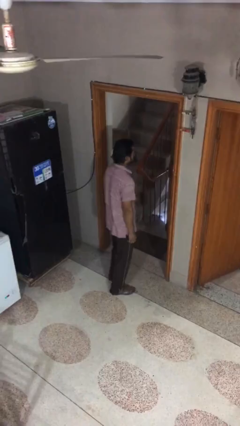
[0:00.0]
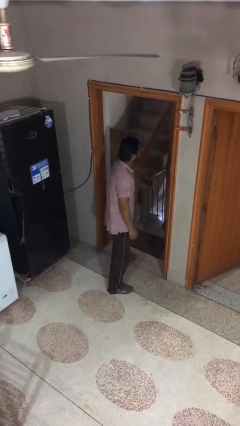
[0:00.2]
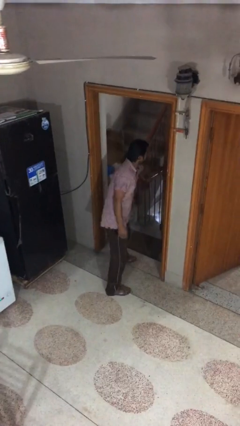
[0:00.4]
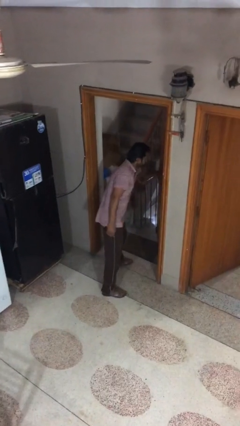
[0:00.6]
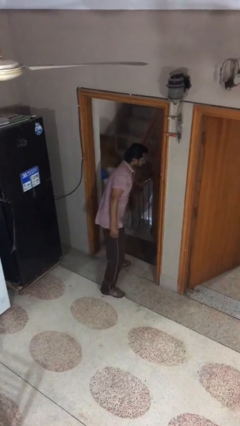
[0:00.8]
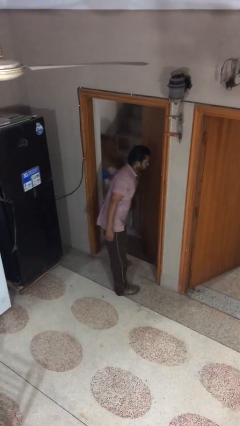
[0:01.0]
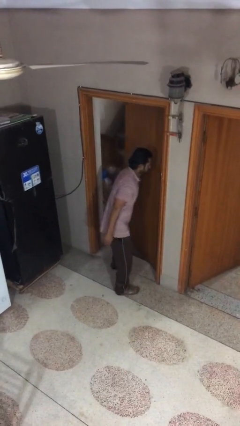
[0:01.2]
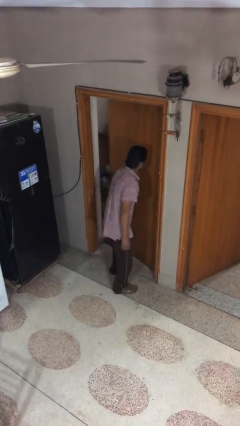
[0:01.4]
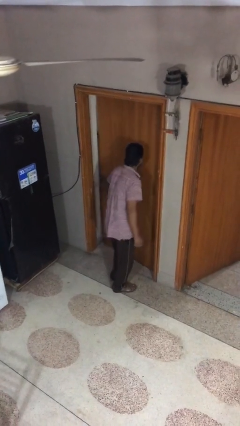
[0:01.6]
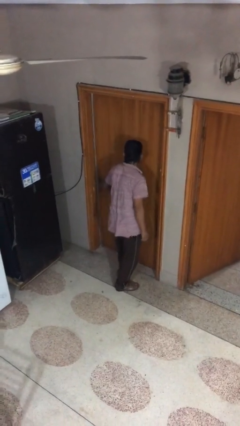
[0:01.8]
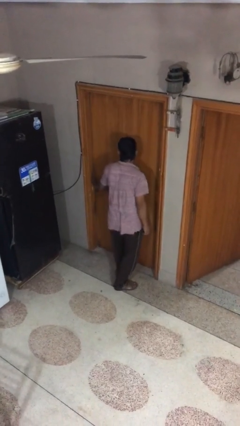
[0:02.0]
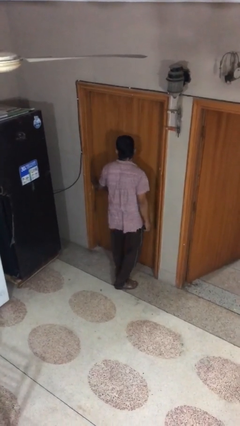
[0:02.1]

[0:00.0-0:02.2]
person closes facility door

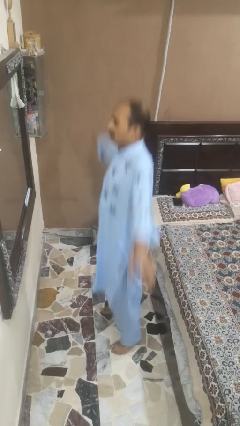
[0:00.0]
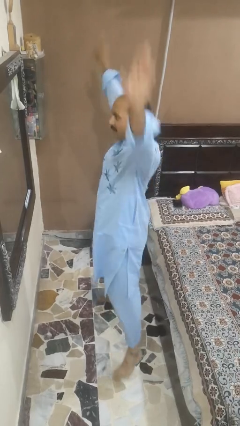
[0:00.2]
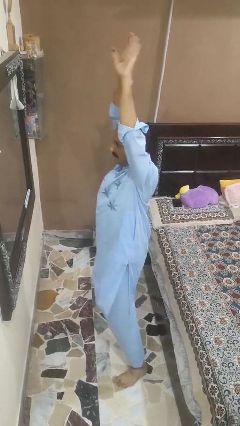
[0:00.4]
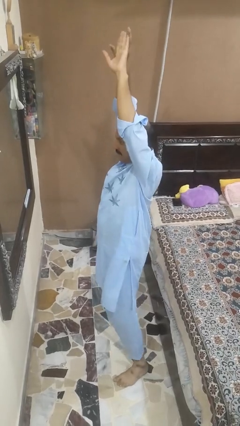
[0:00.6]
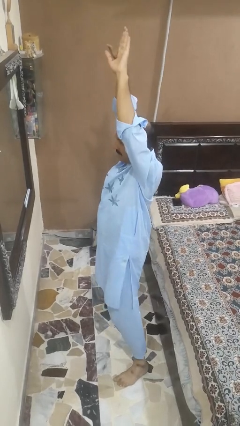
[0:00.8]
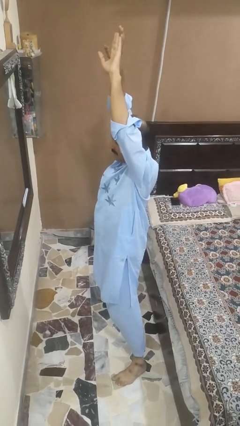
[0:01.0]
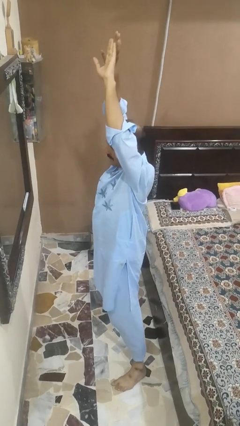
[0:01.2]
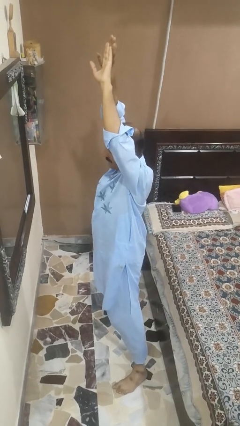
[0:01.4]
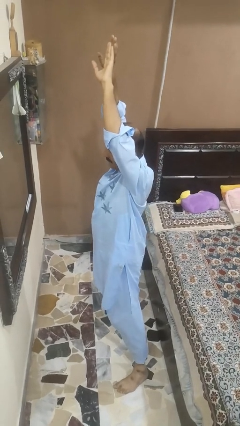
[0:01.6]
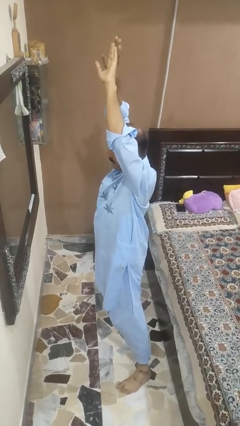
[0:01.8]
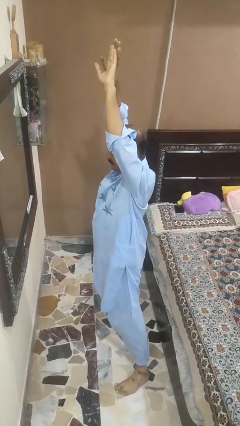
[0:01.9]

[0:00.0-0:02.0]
person exercises with jumping jacks

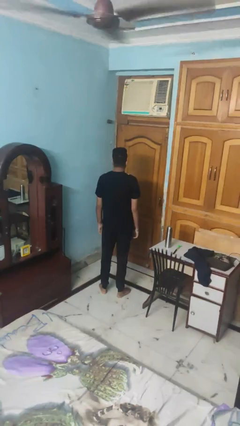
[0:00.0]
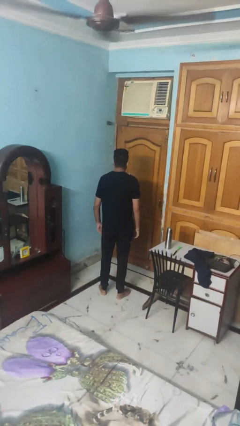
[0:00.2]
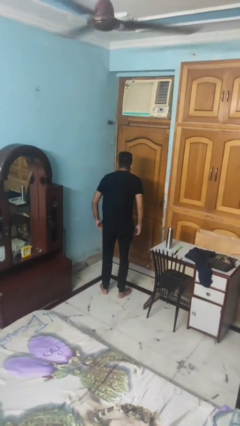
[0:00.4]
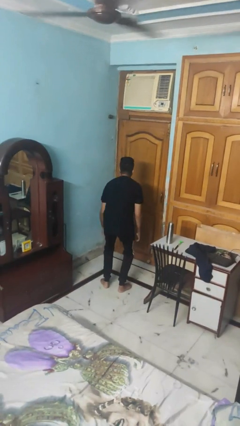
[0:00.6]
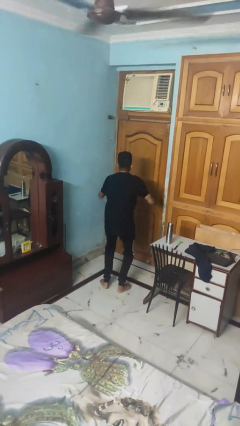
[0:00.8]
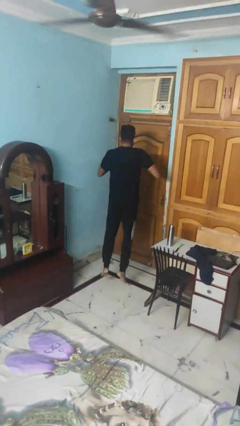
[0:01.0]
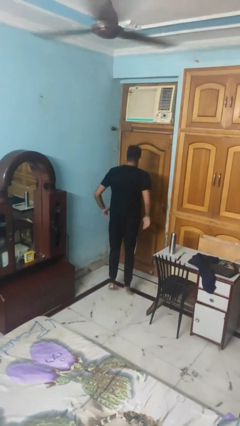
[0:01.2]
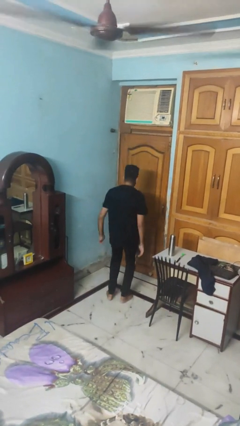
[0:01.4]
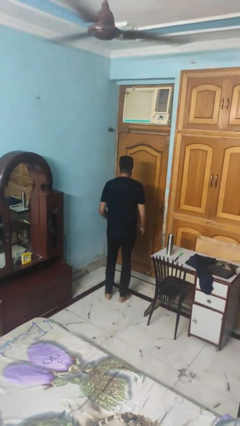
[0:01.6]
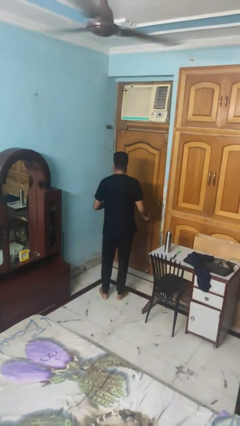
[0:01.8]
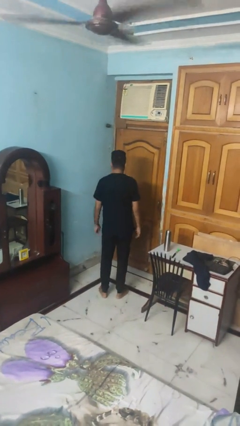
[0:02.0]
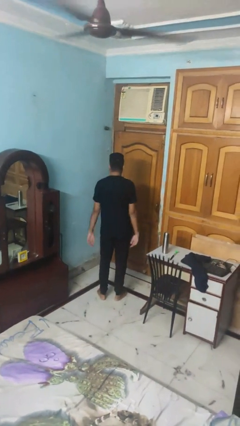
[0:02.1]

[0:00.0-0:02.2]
person jumps

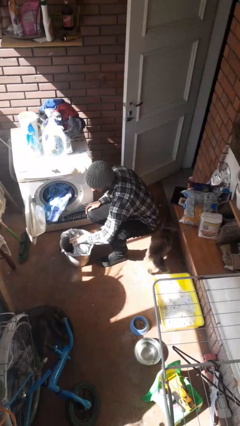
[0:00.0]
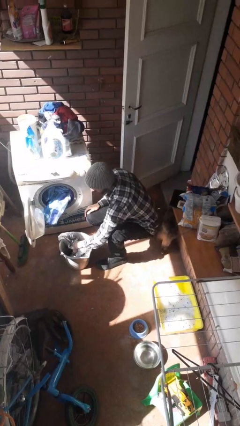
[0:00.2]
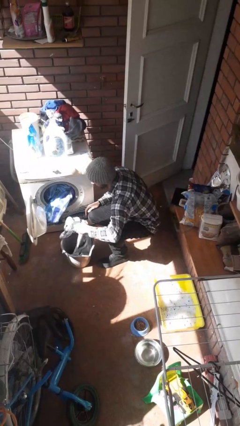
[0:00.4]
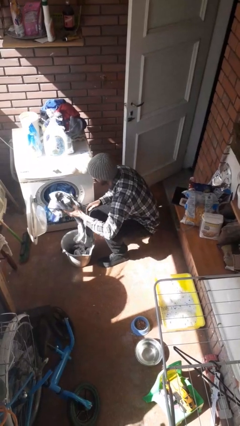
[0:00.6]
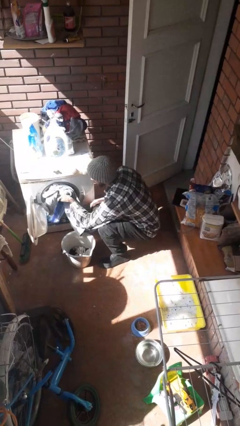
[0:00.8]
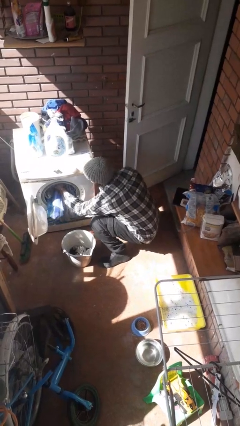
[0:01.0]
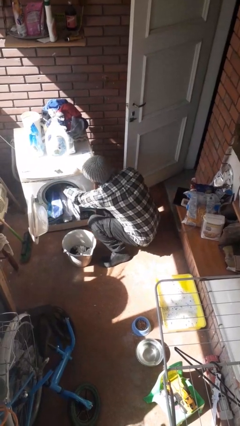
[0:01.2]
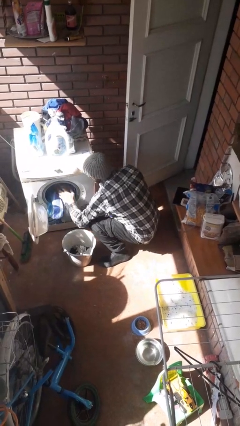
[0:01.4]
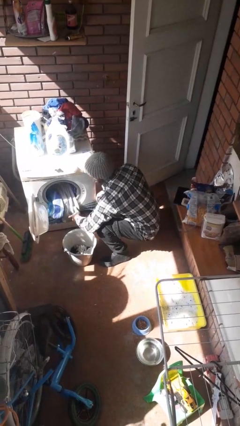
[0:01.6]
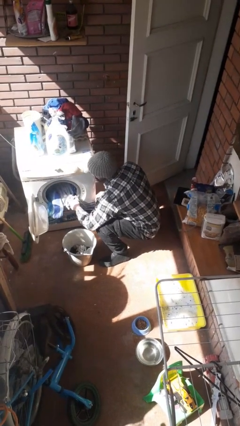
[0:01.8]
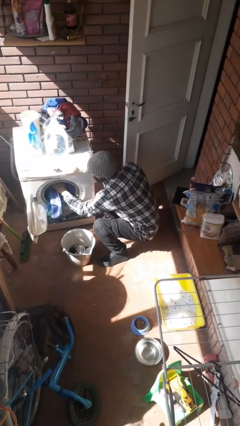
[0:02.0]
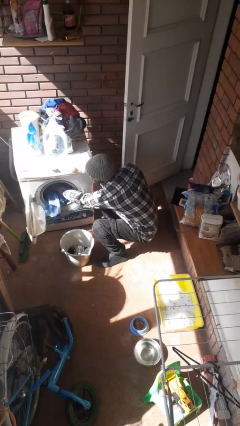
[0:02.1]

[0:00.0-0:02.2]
person loads clotheswasher

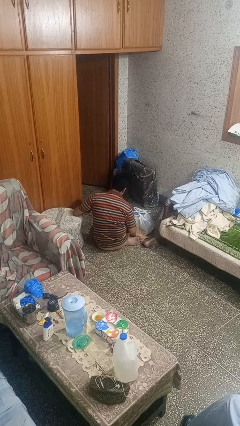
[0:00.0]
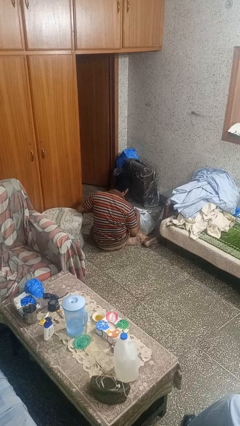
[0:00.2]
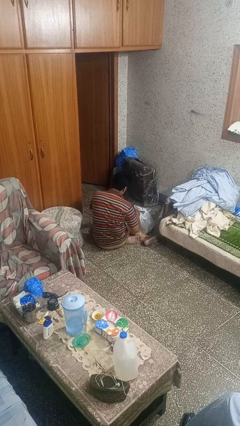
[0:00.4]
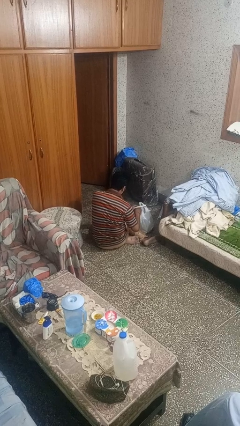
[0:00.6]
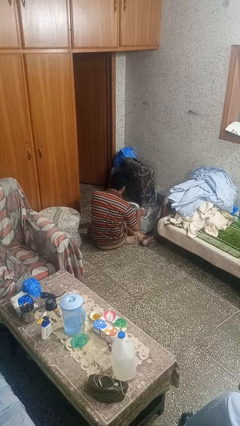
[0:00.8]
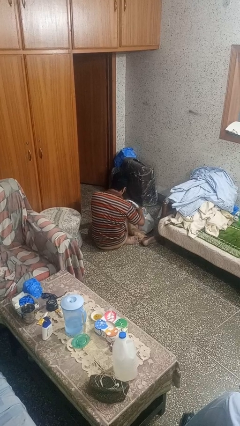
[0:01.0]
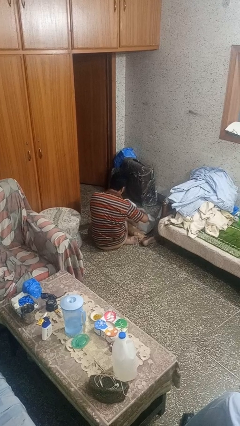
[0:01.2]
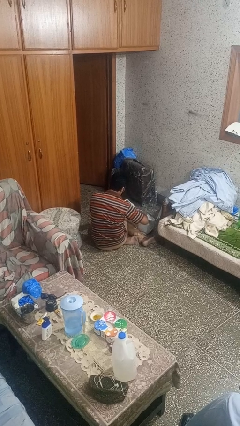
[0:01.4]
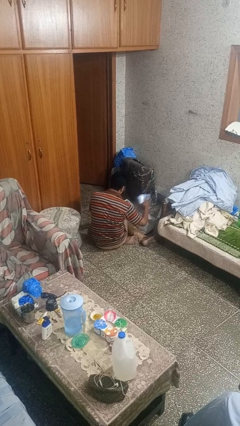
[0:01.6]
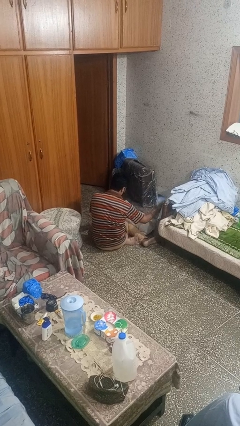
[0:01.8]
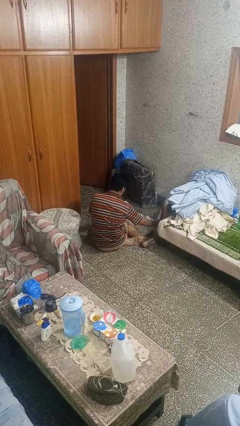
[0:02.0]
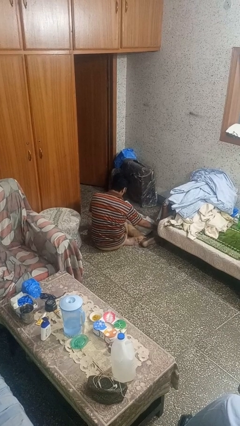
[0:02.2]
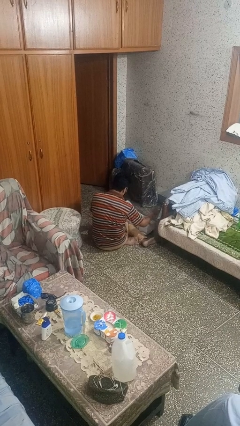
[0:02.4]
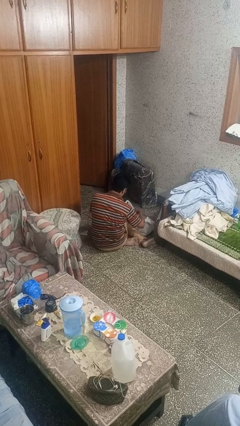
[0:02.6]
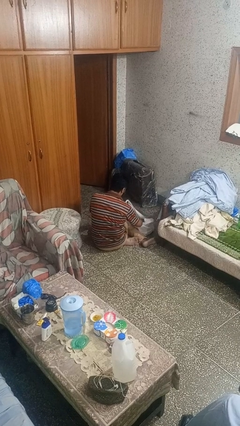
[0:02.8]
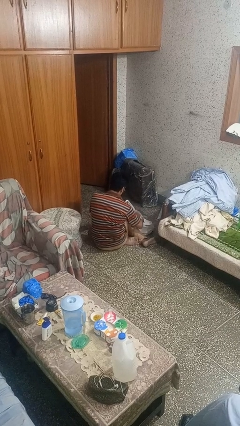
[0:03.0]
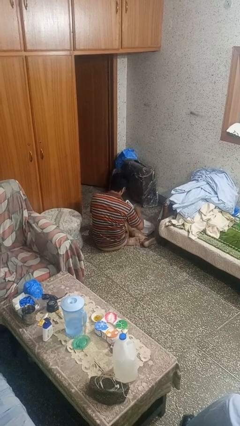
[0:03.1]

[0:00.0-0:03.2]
person takes object from bag

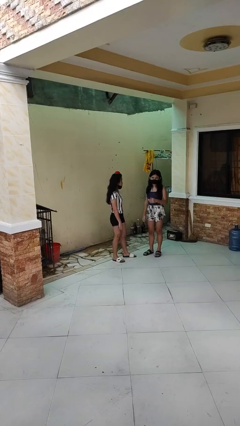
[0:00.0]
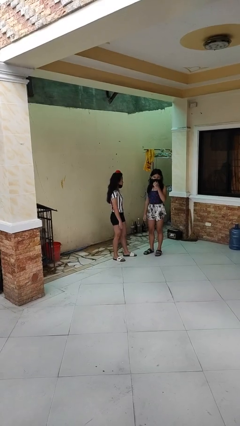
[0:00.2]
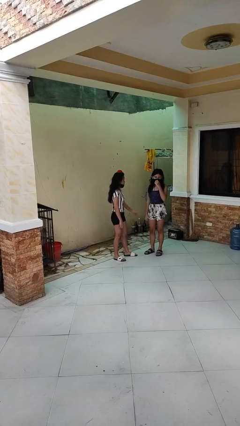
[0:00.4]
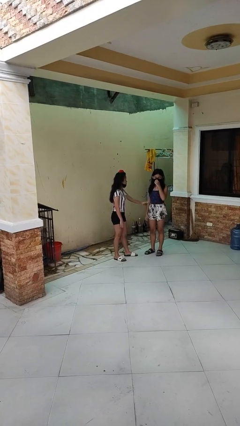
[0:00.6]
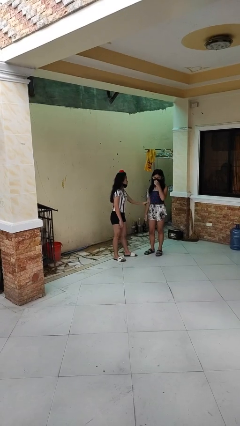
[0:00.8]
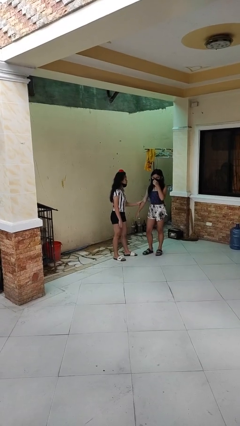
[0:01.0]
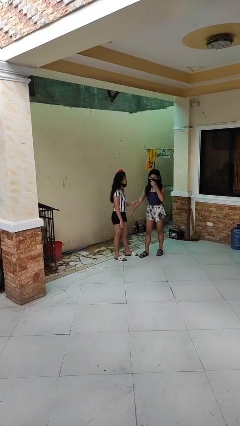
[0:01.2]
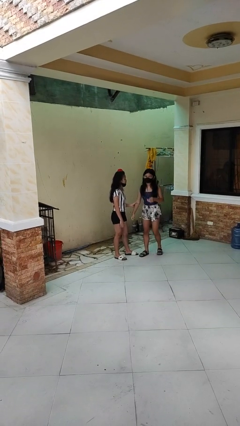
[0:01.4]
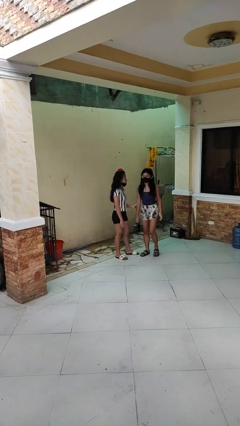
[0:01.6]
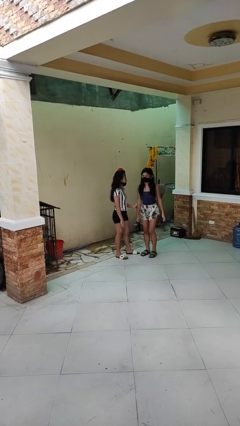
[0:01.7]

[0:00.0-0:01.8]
person grabs person by forearm

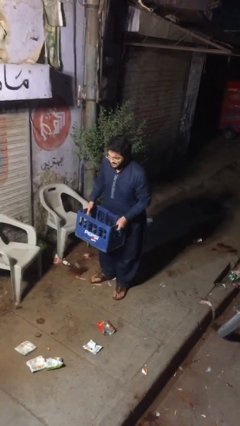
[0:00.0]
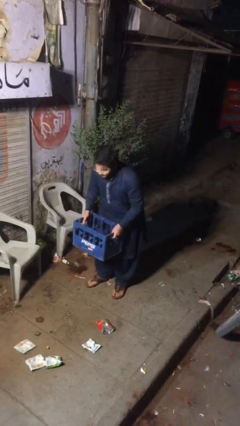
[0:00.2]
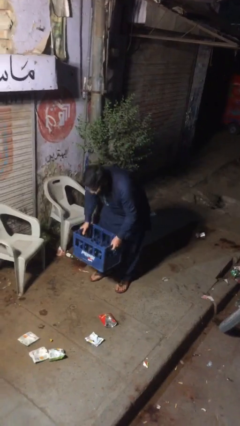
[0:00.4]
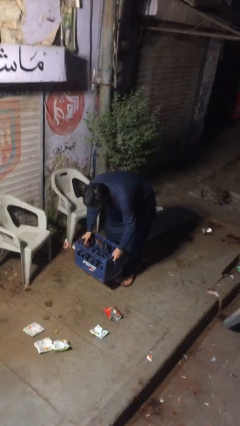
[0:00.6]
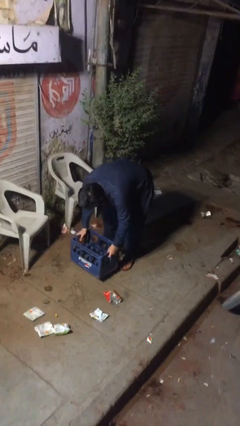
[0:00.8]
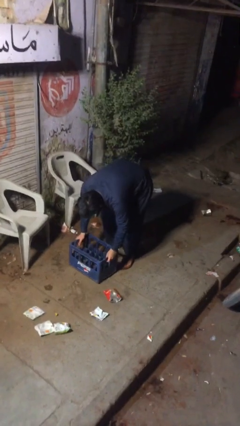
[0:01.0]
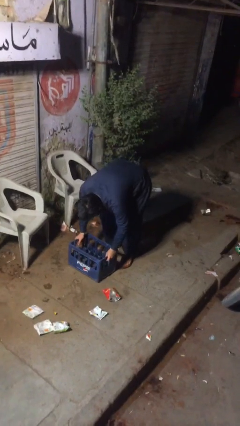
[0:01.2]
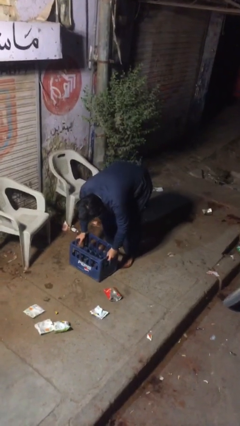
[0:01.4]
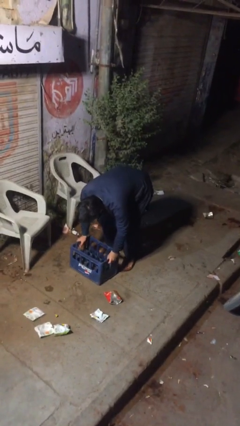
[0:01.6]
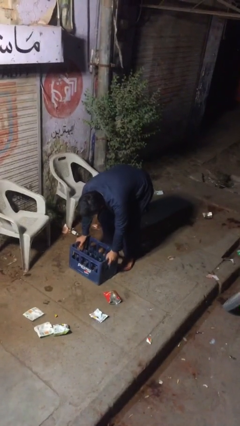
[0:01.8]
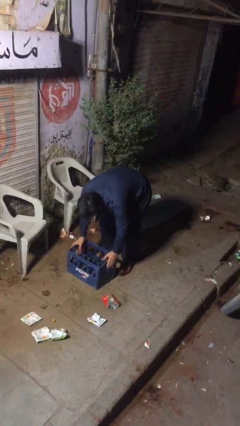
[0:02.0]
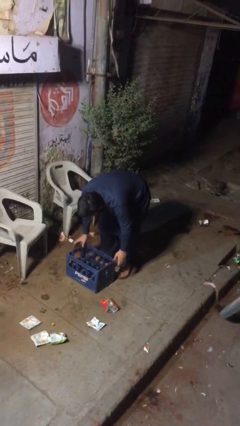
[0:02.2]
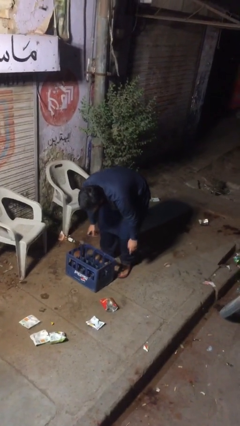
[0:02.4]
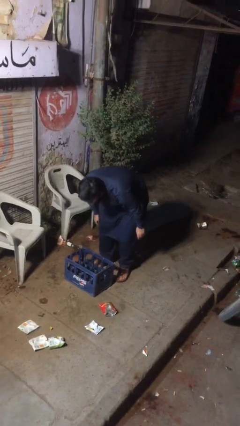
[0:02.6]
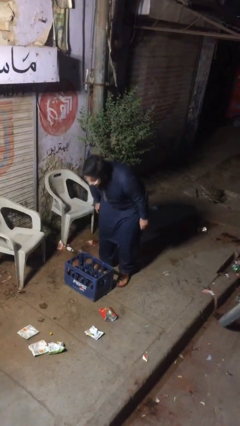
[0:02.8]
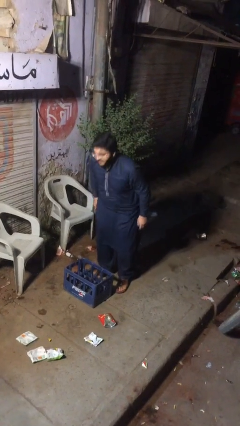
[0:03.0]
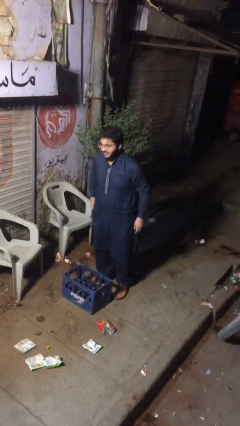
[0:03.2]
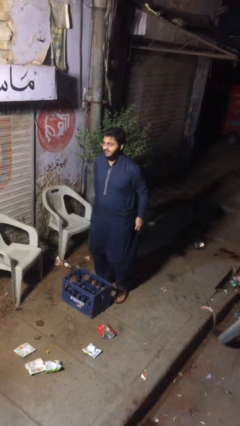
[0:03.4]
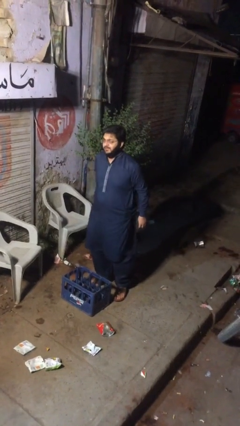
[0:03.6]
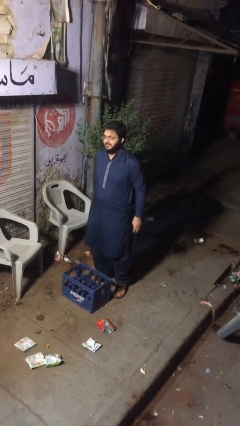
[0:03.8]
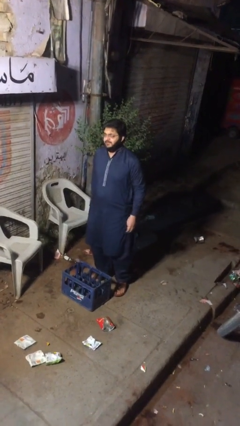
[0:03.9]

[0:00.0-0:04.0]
person puts down object on floor
